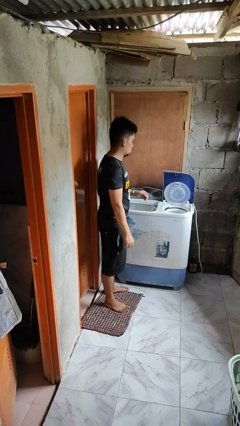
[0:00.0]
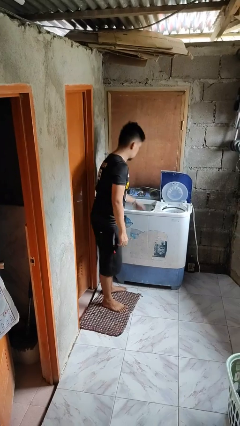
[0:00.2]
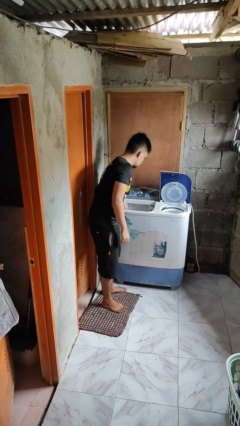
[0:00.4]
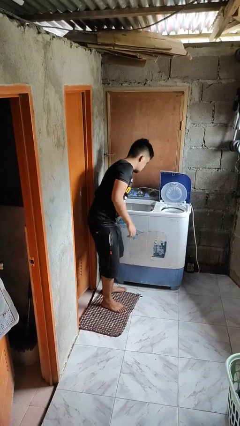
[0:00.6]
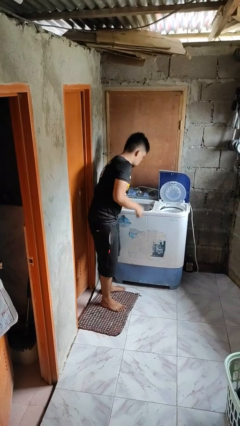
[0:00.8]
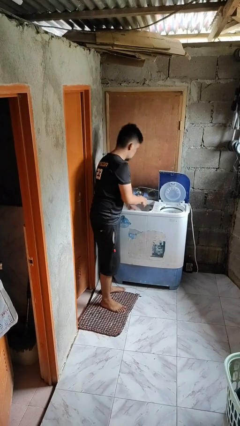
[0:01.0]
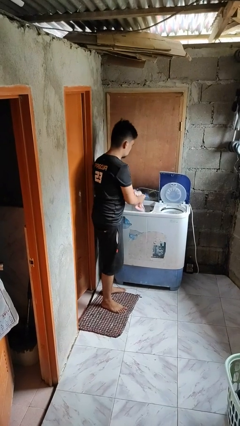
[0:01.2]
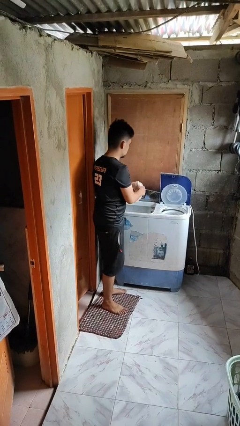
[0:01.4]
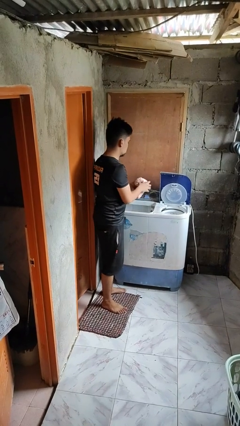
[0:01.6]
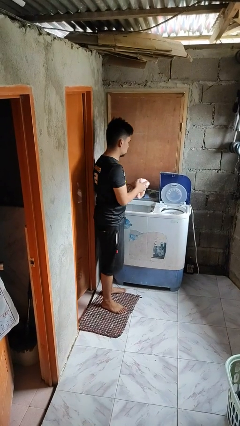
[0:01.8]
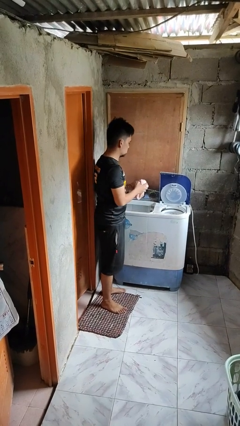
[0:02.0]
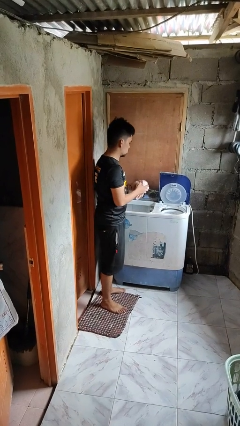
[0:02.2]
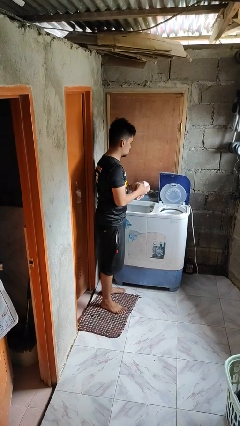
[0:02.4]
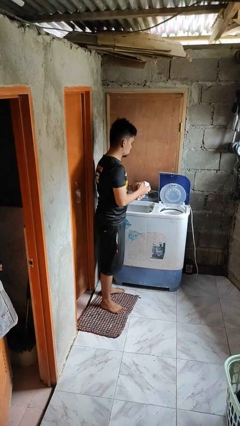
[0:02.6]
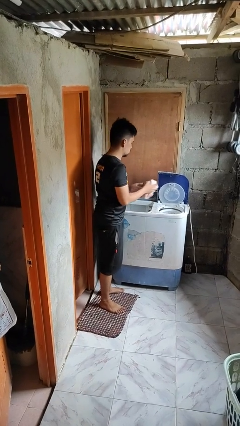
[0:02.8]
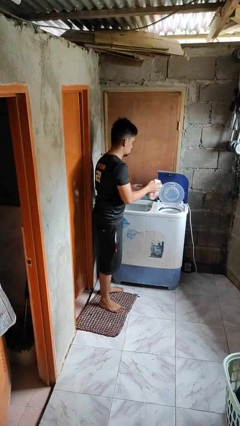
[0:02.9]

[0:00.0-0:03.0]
person unloads clotheswasher

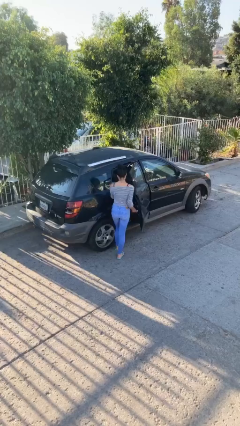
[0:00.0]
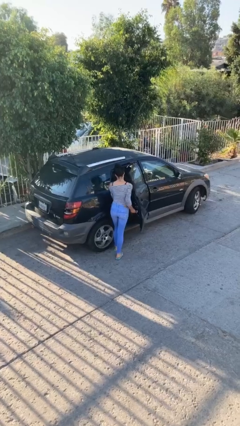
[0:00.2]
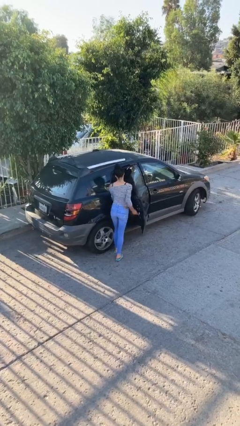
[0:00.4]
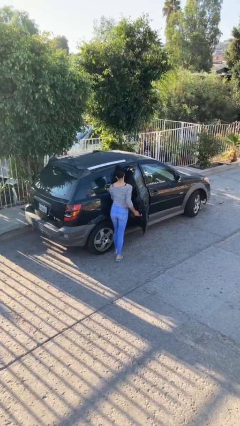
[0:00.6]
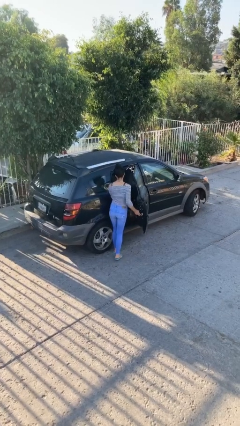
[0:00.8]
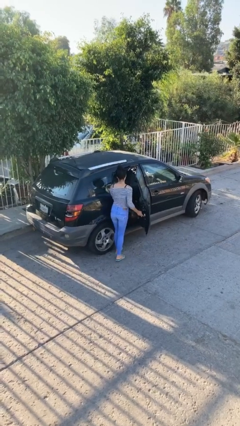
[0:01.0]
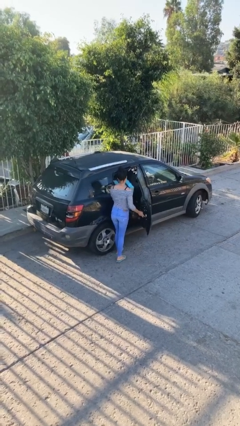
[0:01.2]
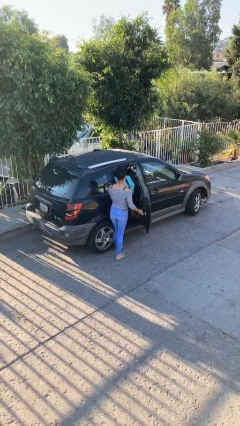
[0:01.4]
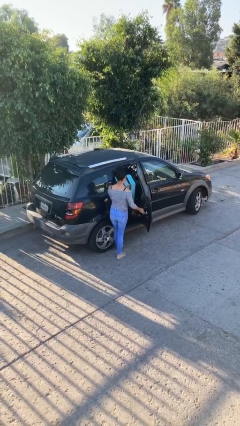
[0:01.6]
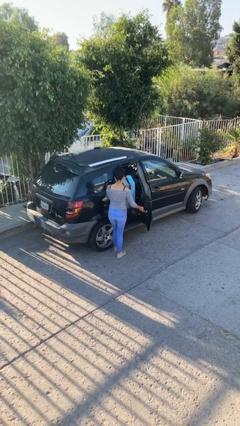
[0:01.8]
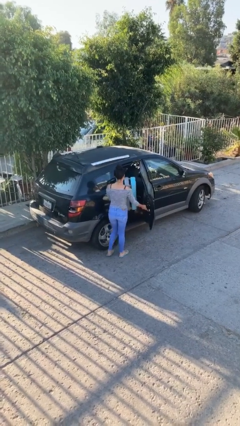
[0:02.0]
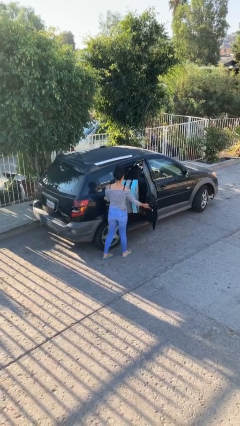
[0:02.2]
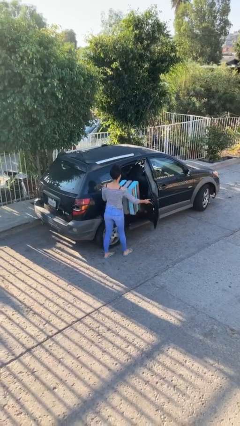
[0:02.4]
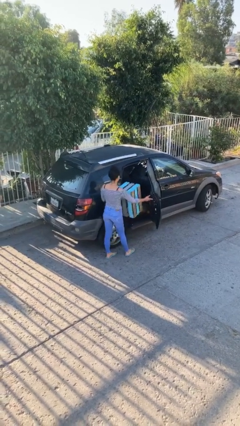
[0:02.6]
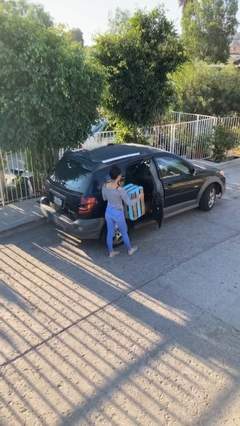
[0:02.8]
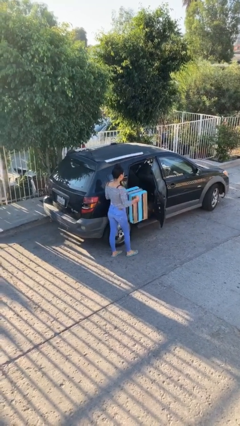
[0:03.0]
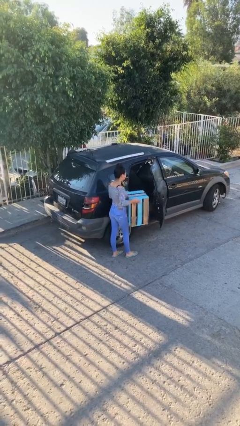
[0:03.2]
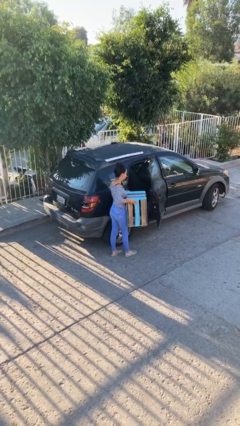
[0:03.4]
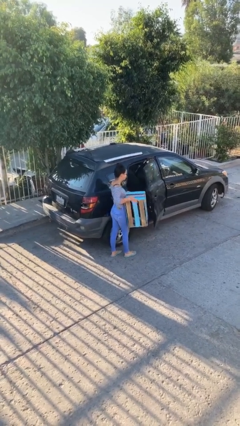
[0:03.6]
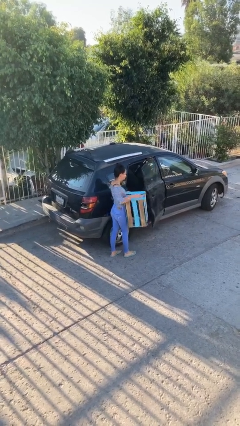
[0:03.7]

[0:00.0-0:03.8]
person unloads car

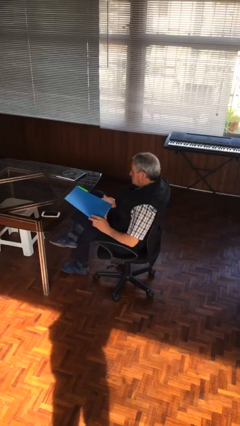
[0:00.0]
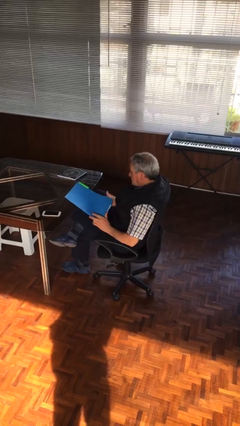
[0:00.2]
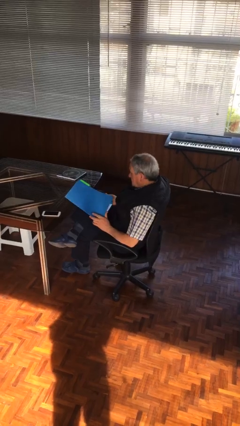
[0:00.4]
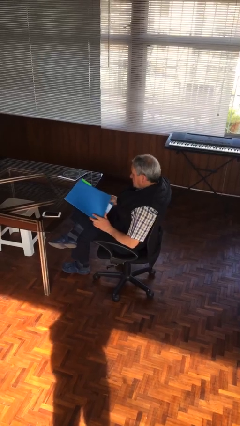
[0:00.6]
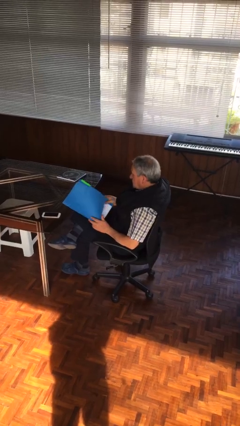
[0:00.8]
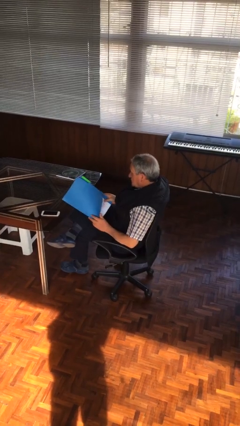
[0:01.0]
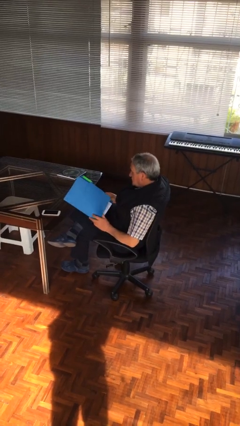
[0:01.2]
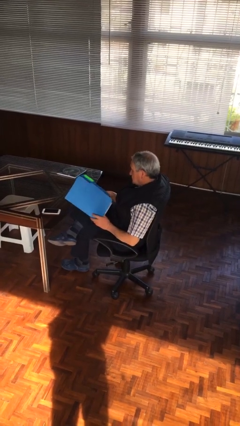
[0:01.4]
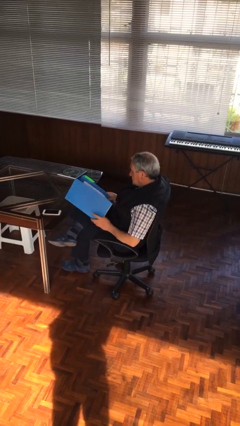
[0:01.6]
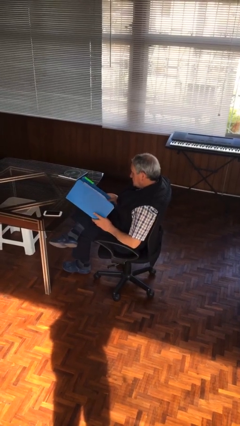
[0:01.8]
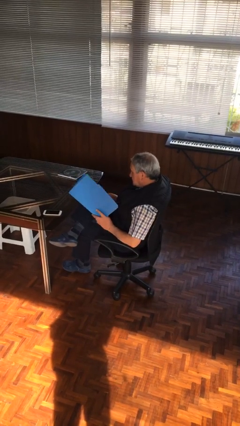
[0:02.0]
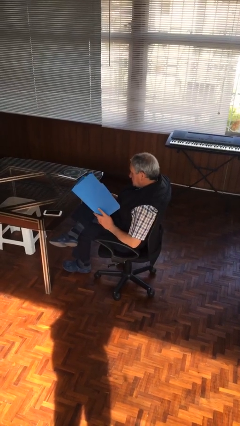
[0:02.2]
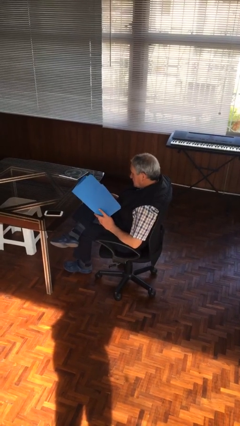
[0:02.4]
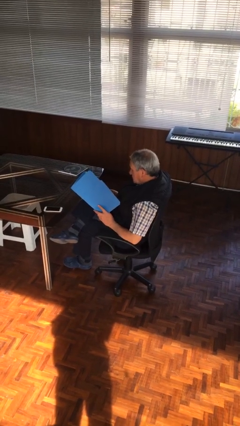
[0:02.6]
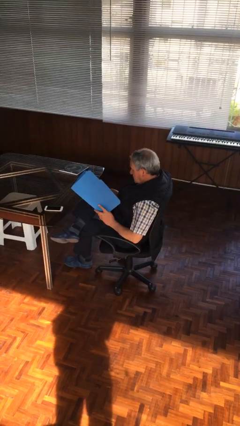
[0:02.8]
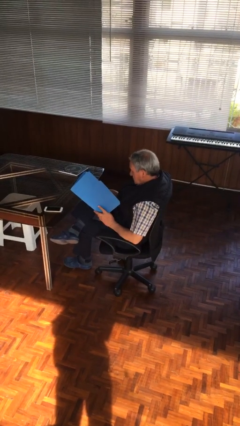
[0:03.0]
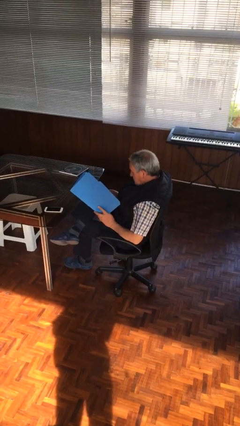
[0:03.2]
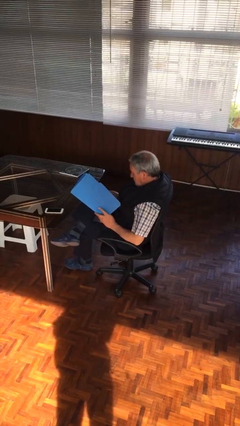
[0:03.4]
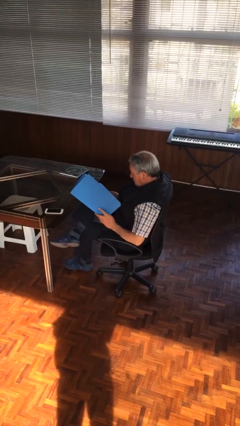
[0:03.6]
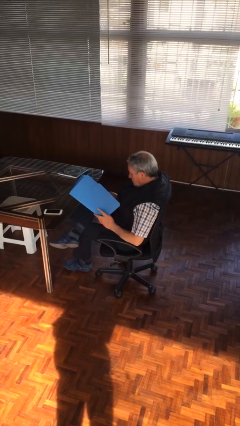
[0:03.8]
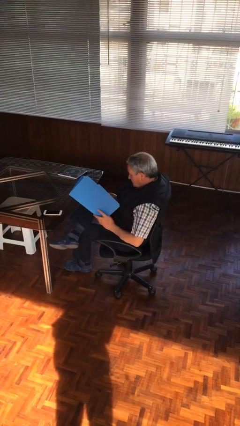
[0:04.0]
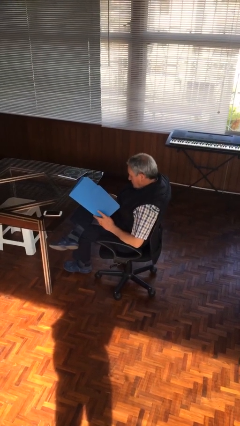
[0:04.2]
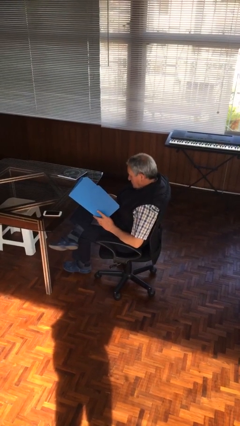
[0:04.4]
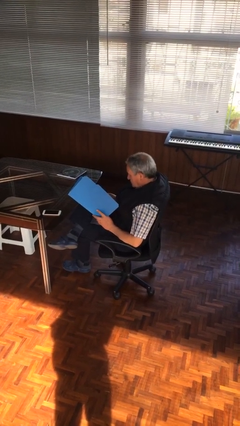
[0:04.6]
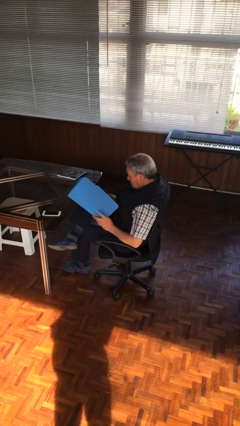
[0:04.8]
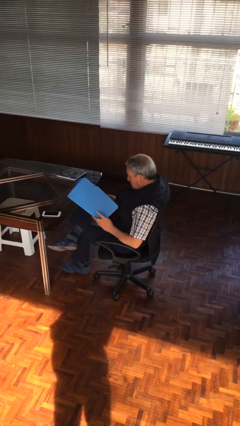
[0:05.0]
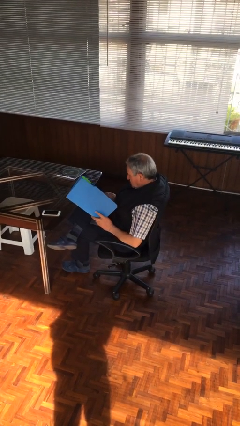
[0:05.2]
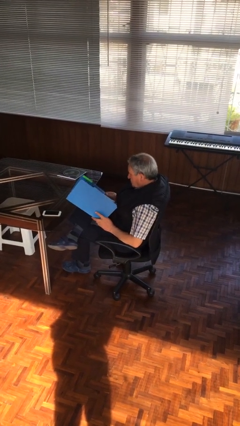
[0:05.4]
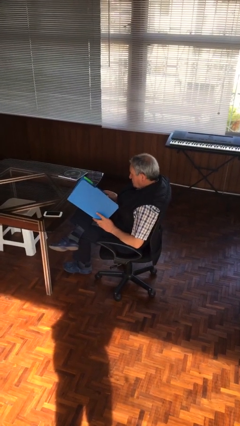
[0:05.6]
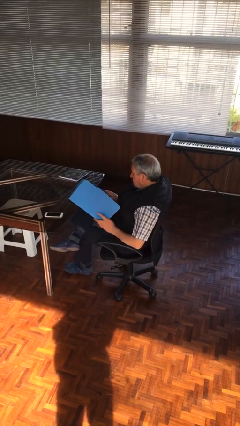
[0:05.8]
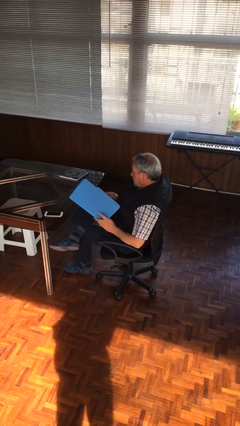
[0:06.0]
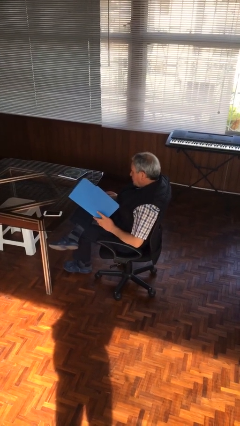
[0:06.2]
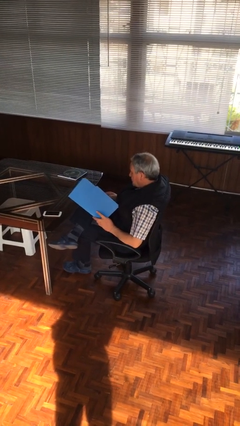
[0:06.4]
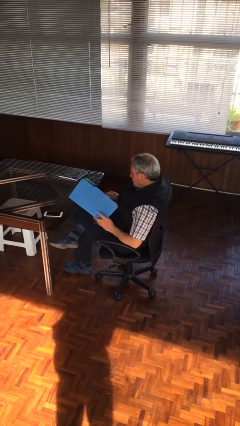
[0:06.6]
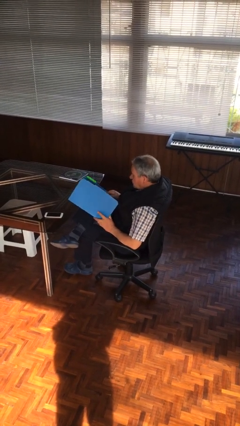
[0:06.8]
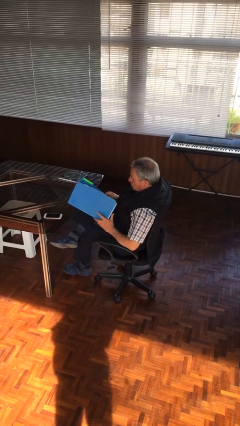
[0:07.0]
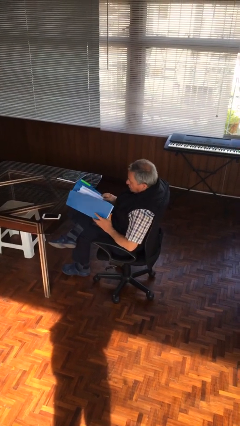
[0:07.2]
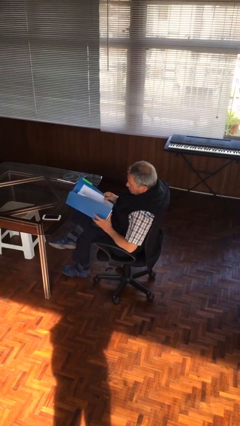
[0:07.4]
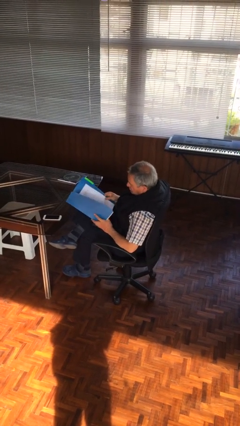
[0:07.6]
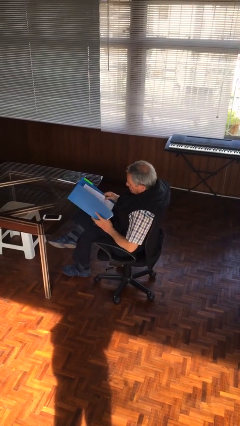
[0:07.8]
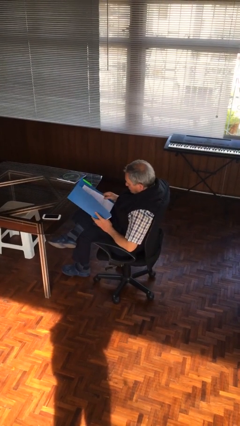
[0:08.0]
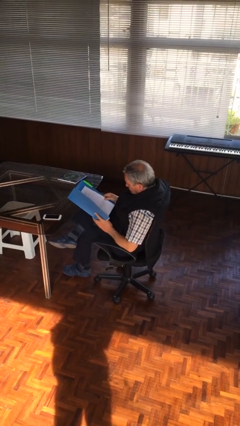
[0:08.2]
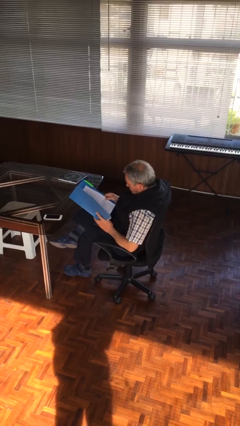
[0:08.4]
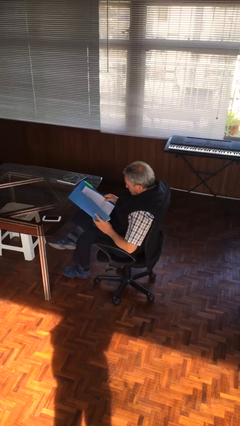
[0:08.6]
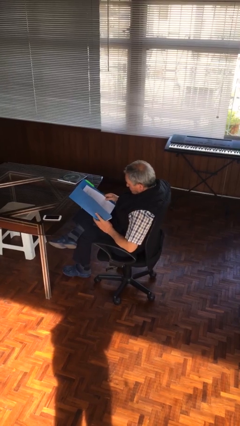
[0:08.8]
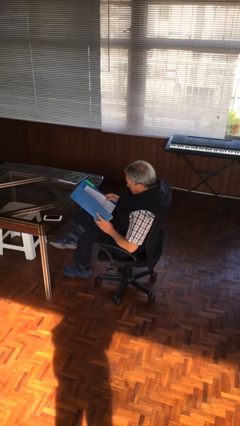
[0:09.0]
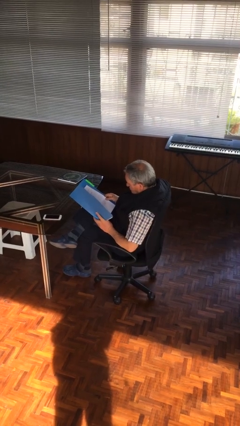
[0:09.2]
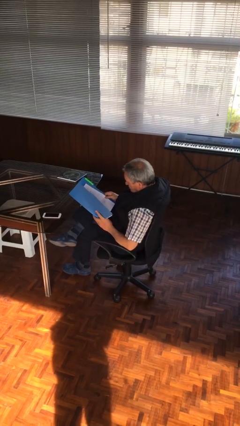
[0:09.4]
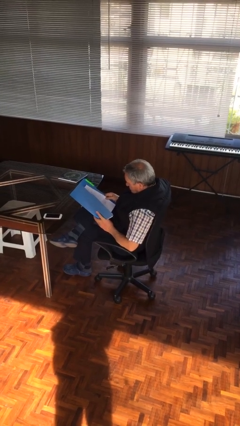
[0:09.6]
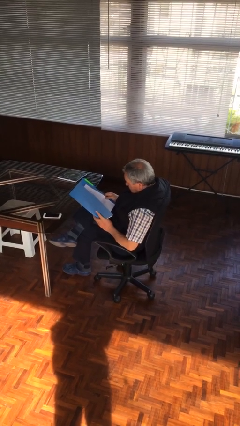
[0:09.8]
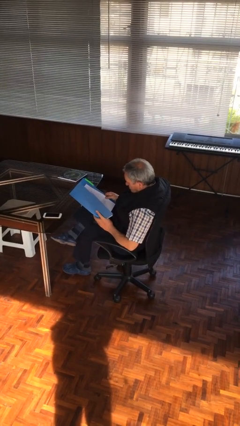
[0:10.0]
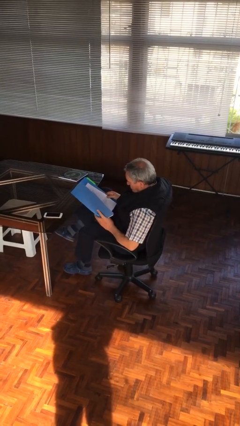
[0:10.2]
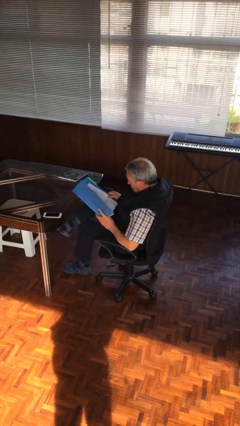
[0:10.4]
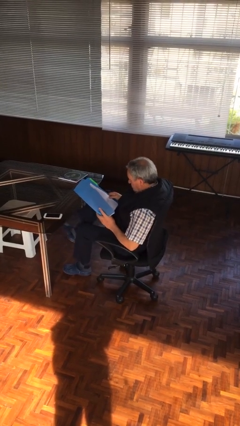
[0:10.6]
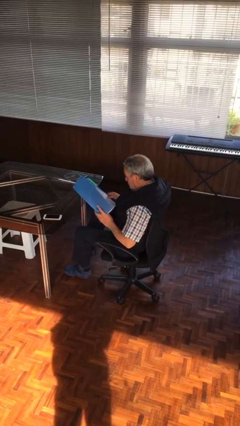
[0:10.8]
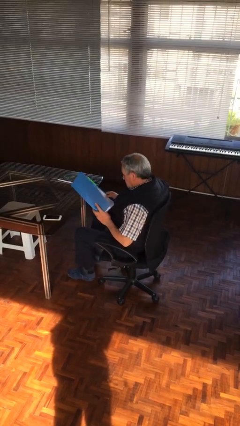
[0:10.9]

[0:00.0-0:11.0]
person reads document
